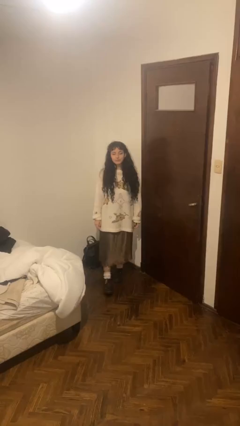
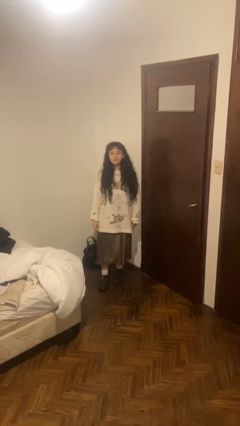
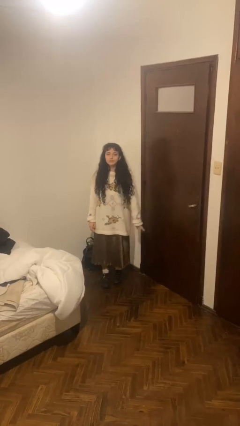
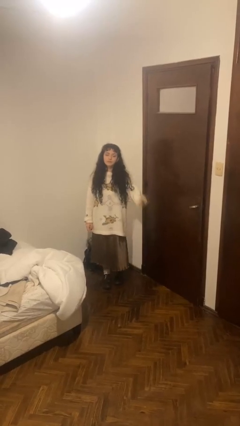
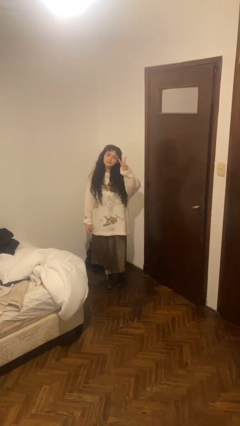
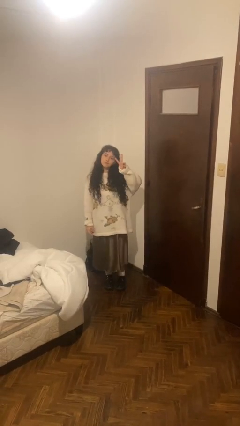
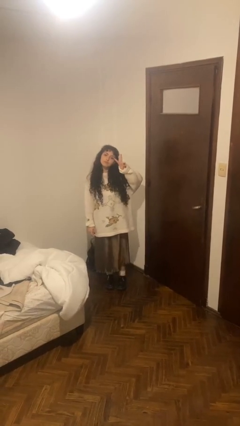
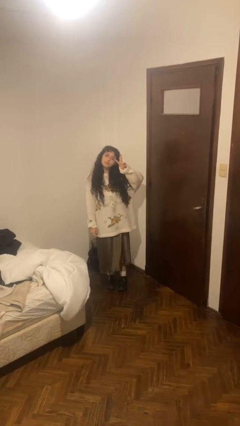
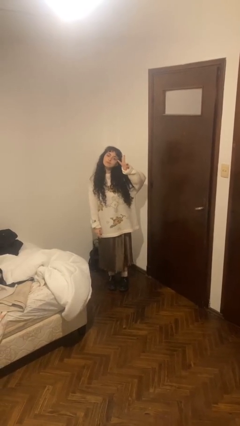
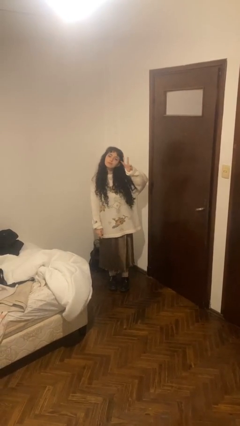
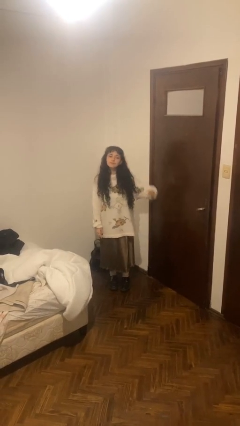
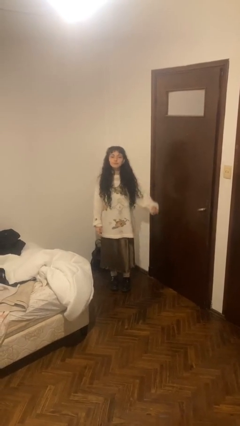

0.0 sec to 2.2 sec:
person gestures peace

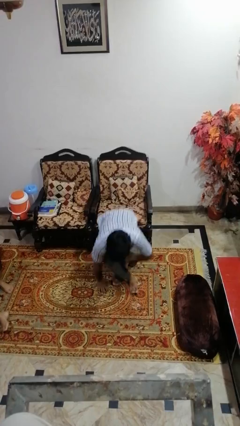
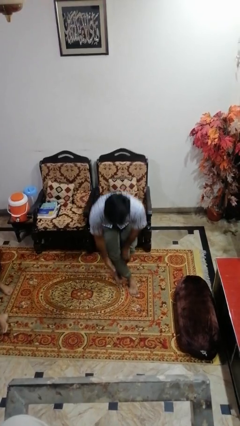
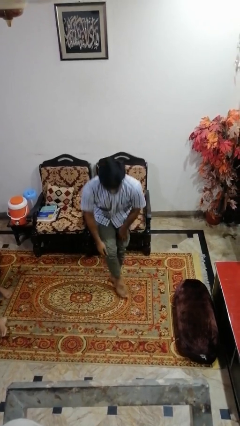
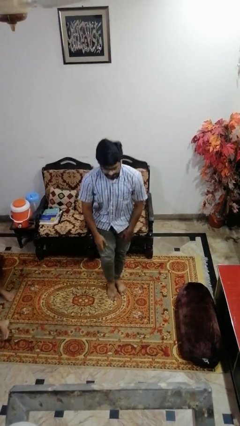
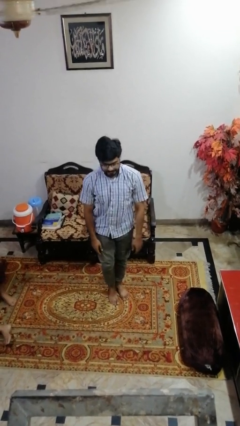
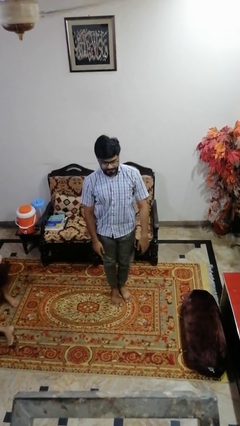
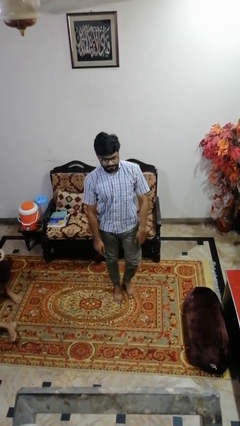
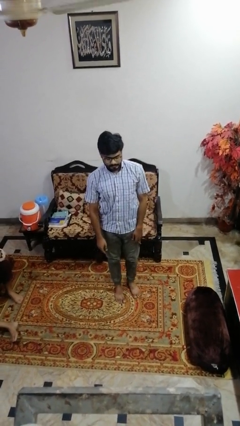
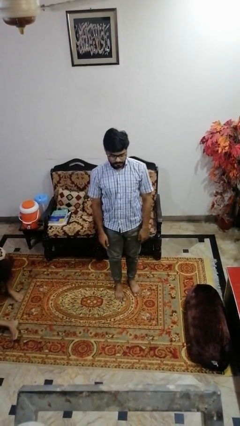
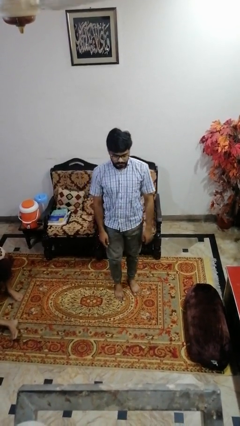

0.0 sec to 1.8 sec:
person stands up from floor

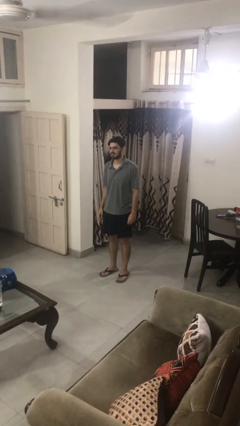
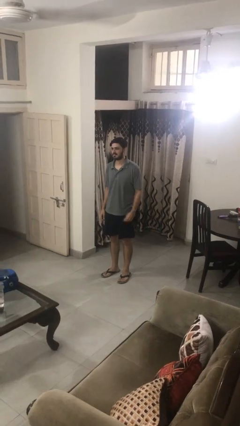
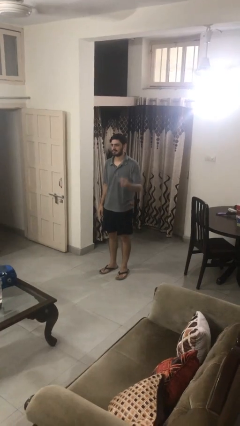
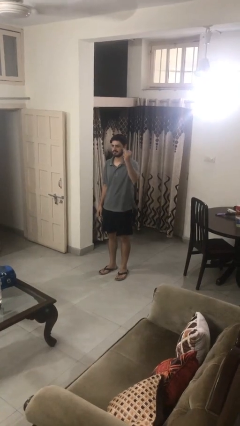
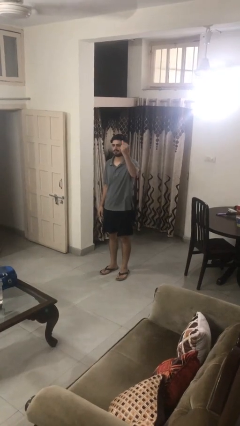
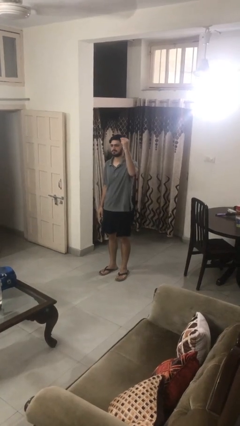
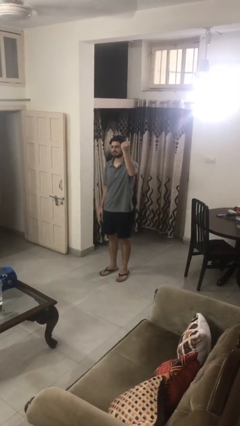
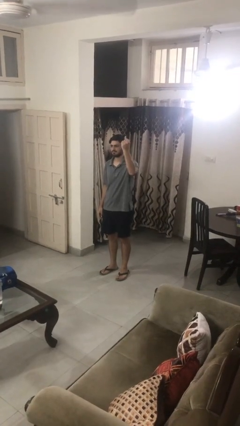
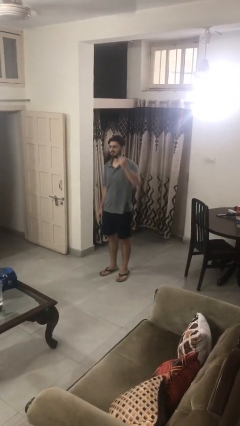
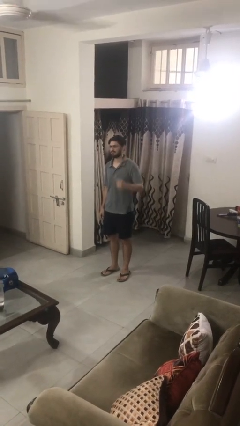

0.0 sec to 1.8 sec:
person snaps fingers

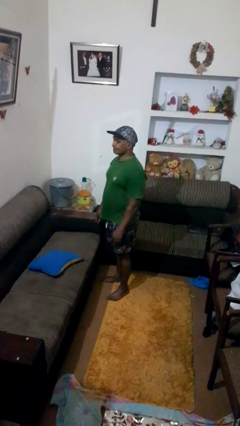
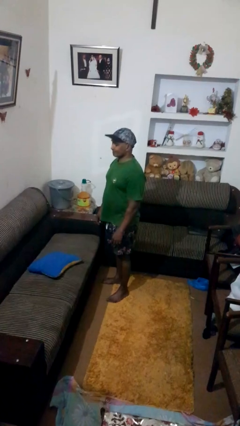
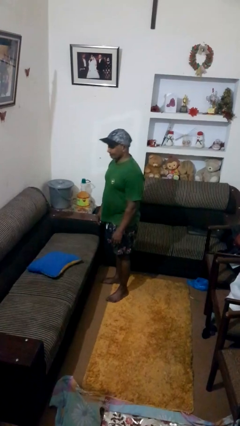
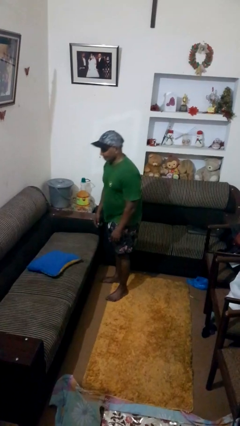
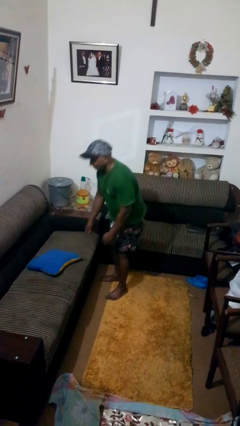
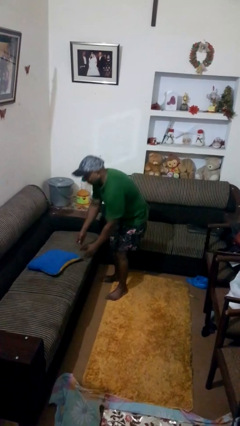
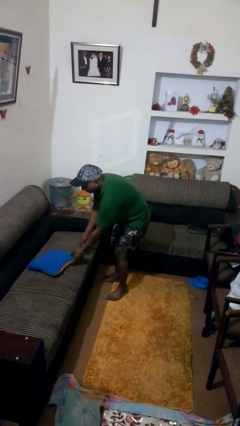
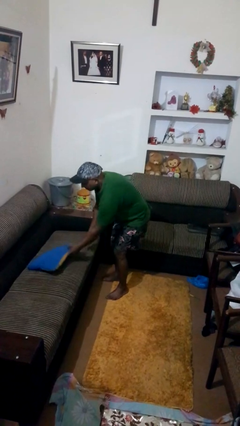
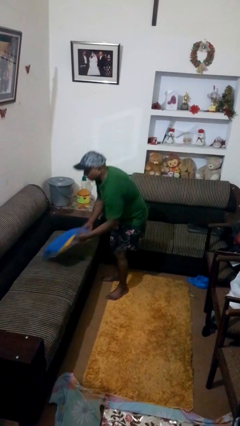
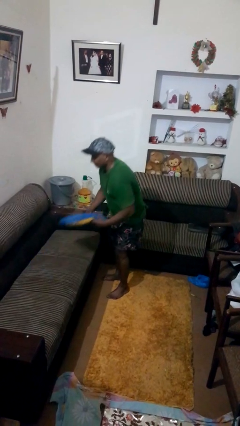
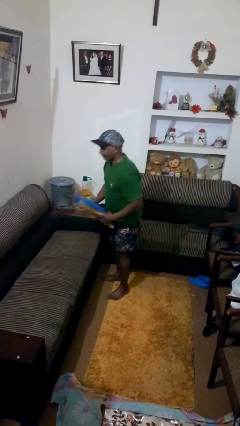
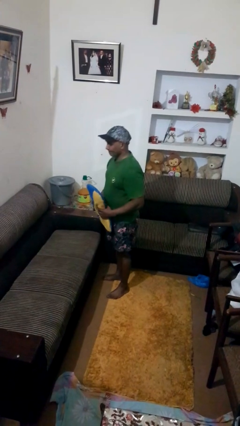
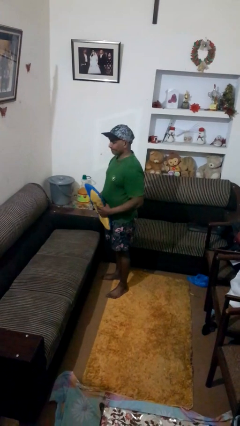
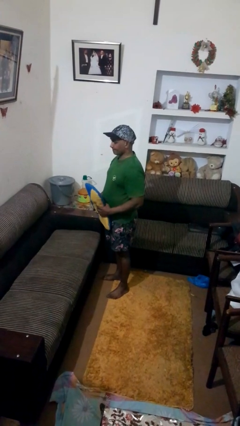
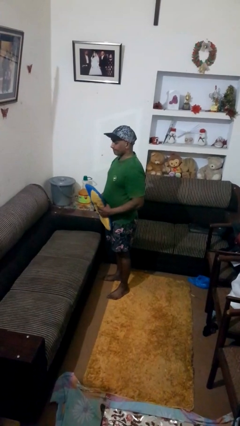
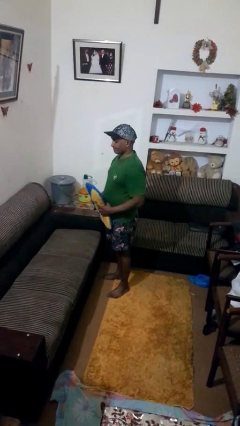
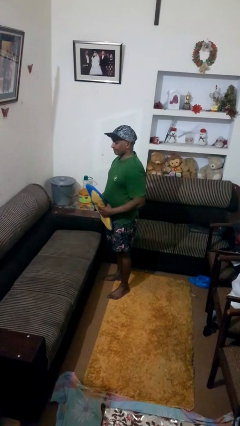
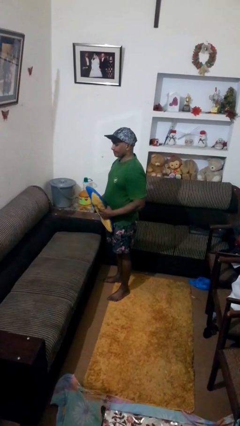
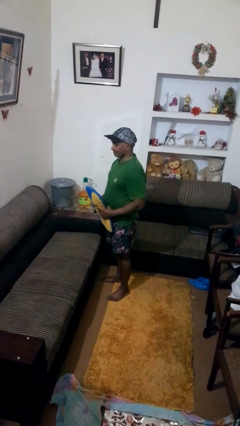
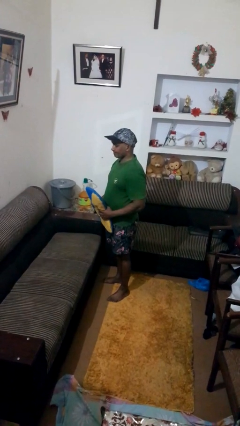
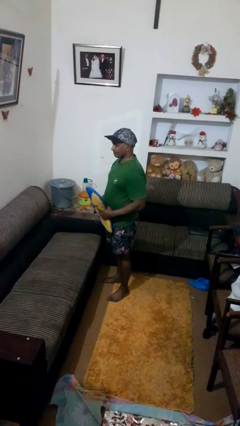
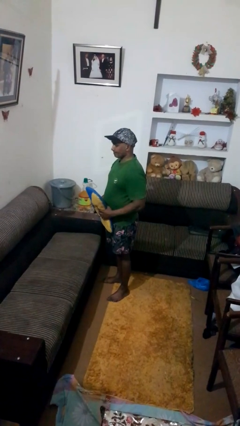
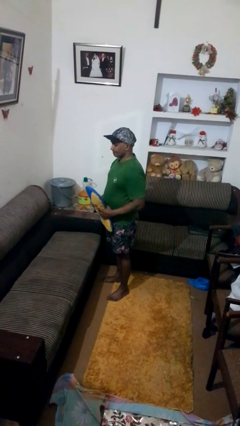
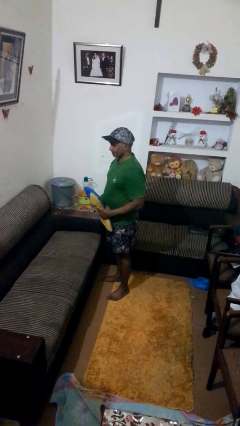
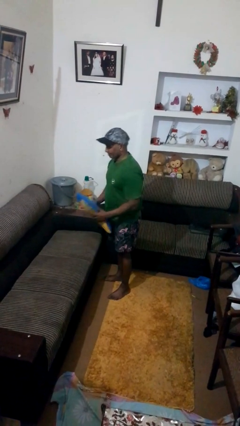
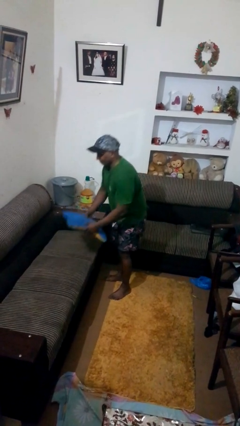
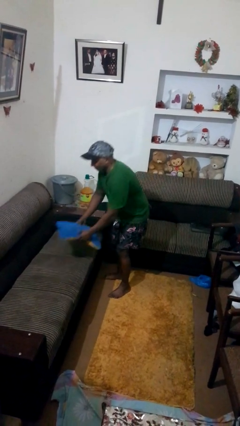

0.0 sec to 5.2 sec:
person picks up object from couch

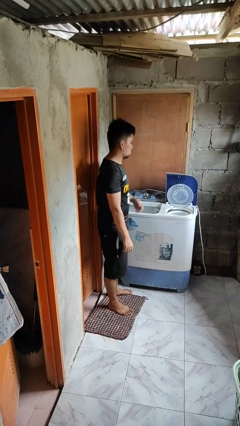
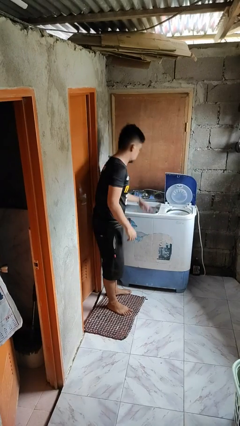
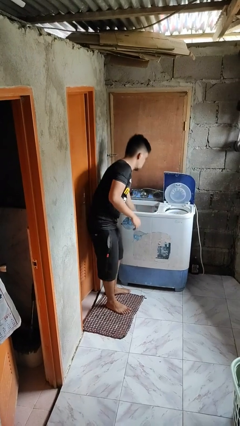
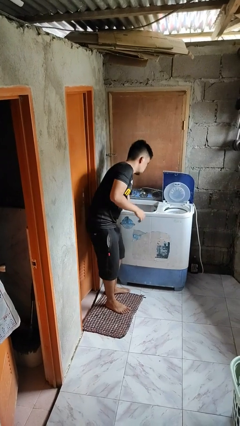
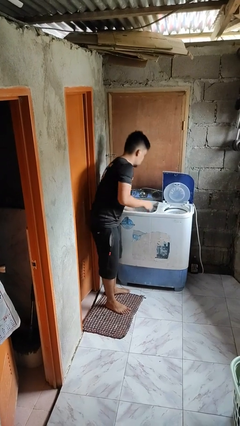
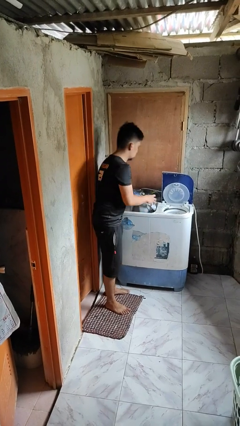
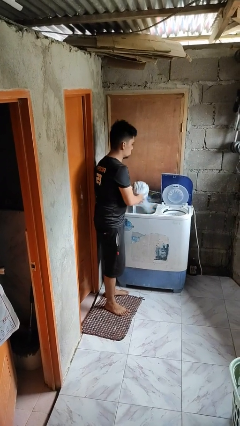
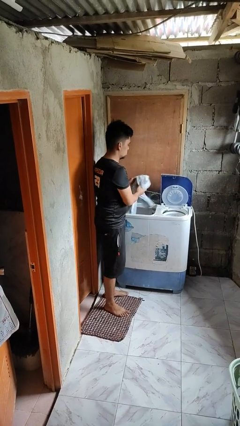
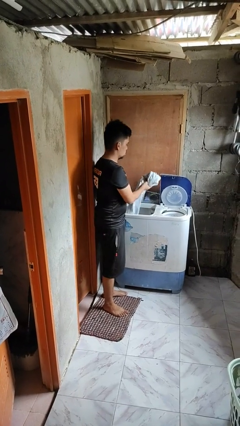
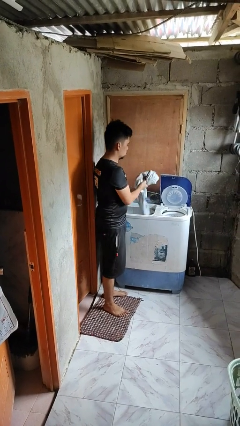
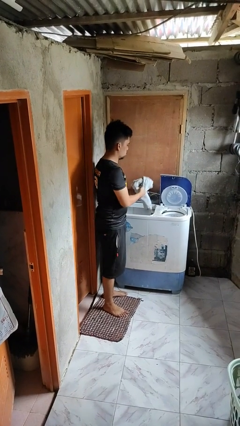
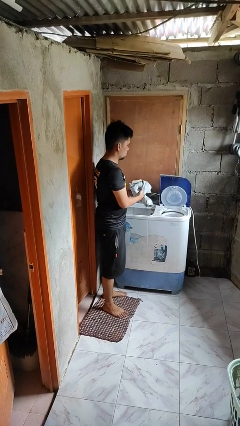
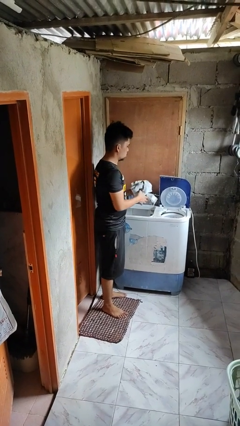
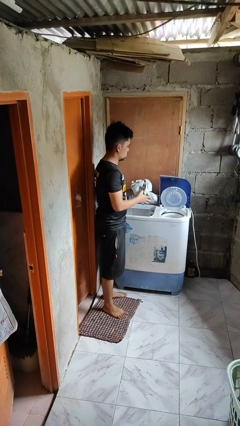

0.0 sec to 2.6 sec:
person unloads clotheswasher

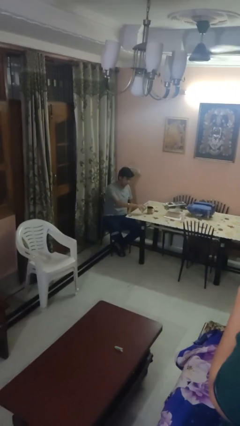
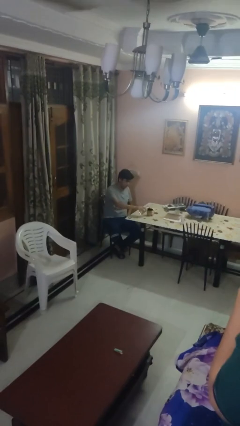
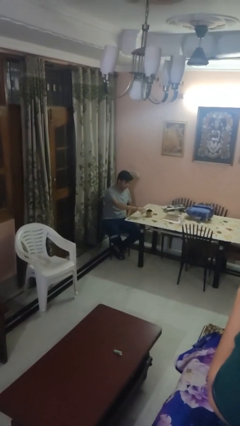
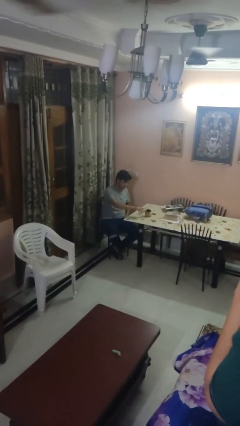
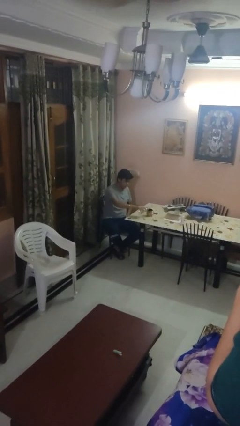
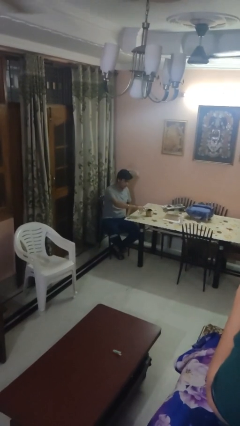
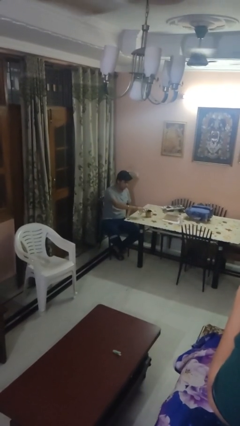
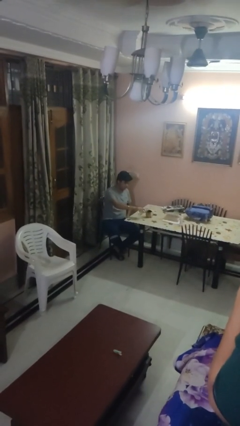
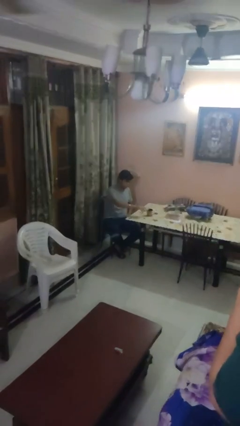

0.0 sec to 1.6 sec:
person pours liquid into cup

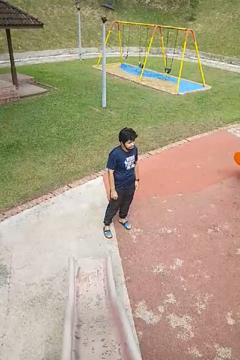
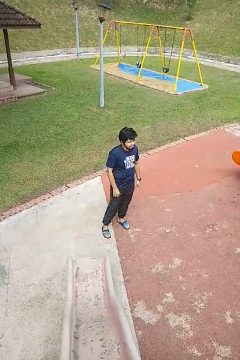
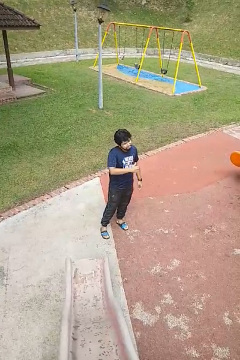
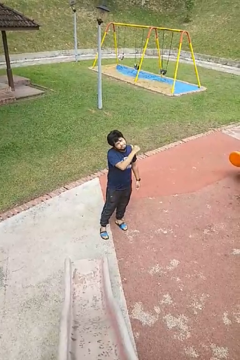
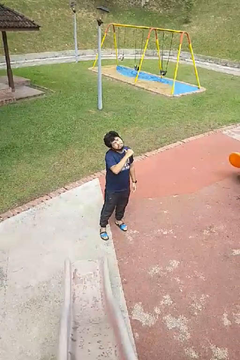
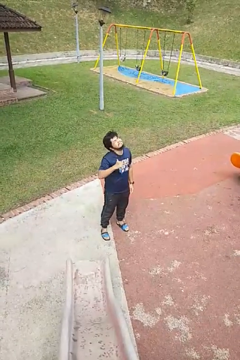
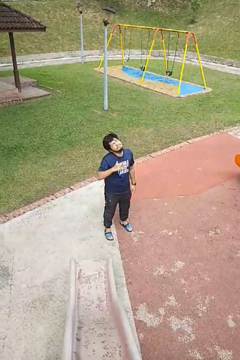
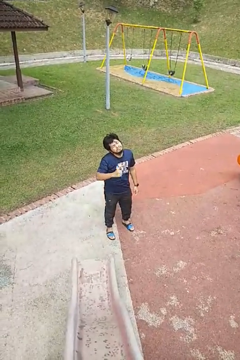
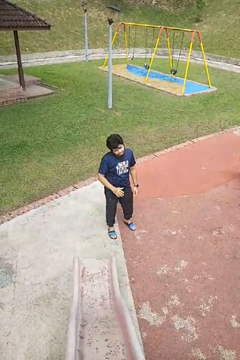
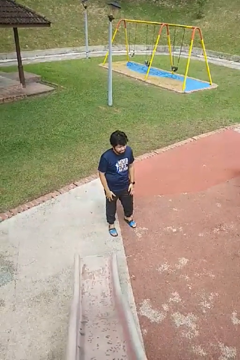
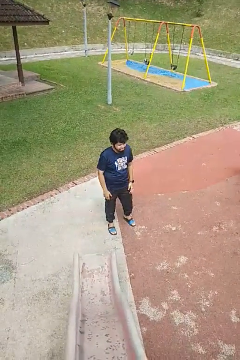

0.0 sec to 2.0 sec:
person gestures cut

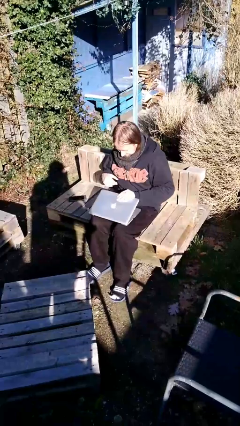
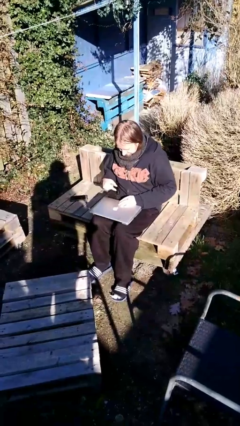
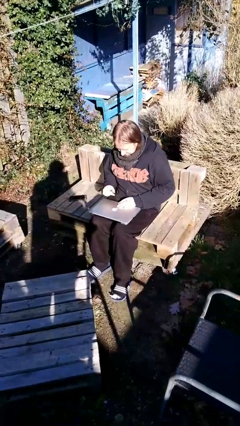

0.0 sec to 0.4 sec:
person interacts with laptop
